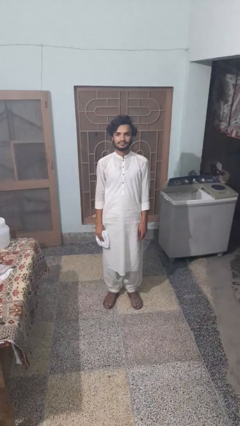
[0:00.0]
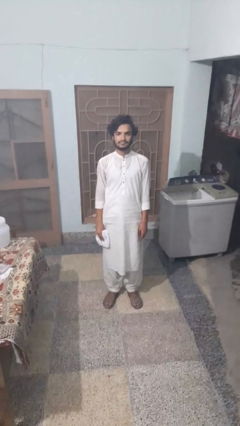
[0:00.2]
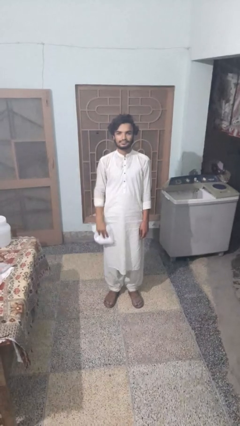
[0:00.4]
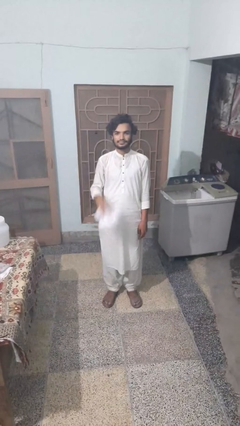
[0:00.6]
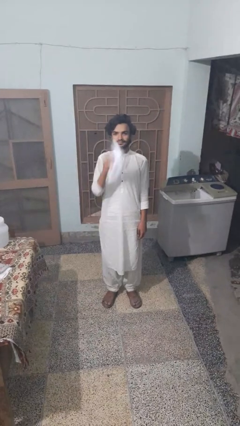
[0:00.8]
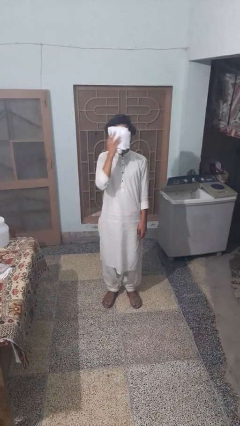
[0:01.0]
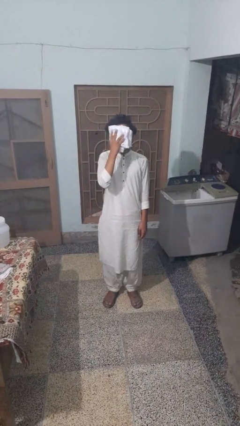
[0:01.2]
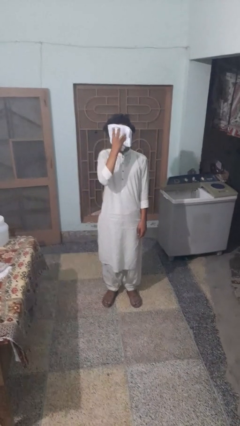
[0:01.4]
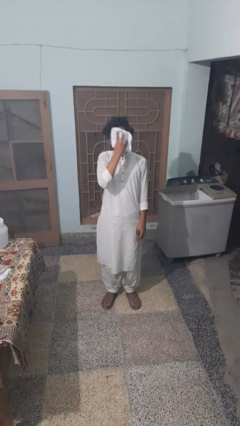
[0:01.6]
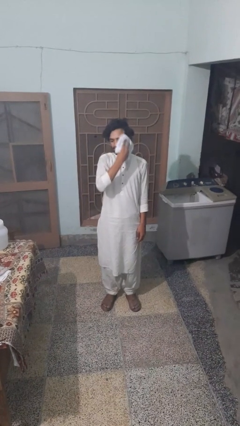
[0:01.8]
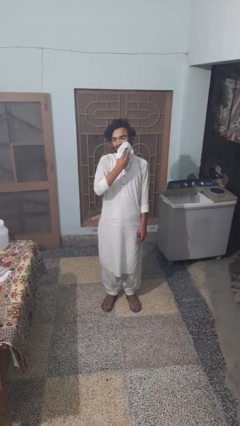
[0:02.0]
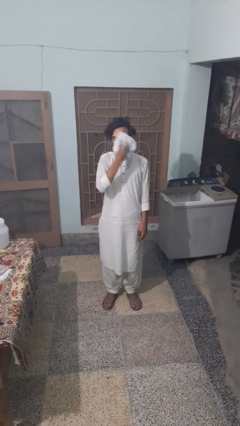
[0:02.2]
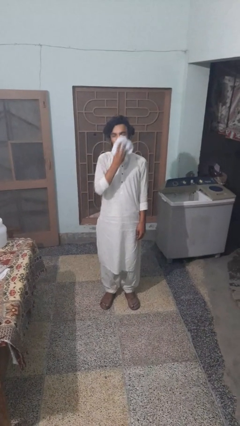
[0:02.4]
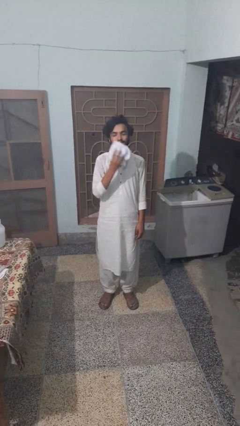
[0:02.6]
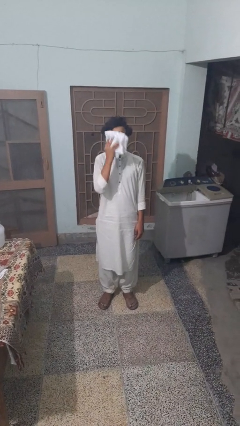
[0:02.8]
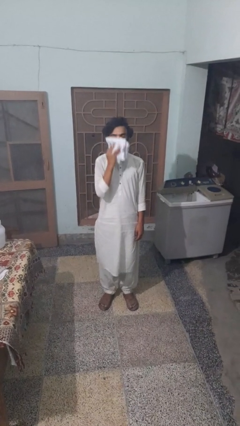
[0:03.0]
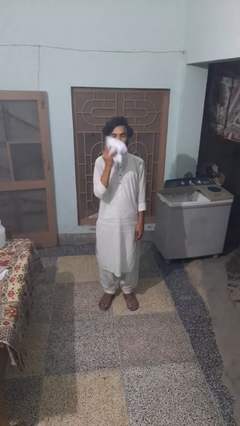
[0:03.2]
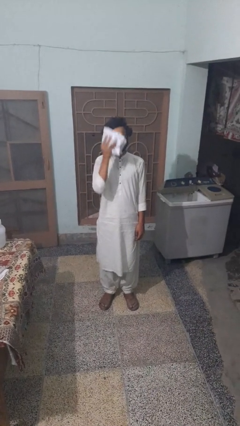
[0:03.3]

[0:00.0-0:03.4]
person wipes mouth with napkin

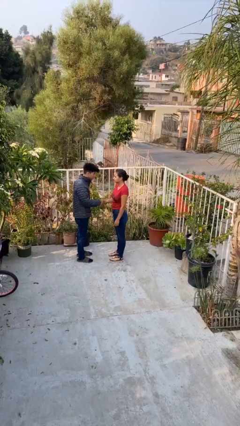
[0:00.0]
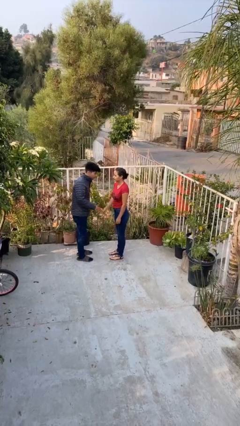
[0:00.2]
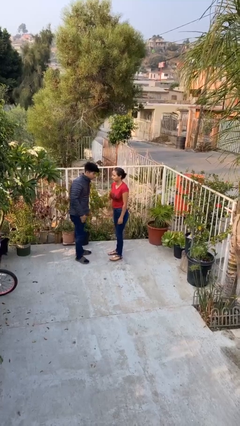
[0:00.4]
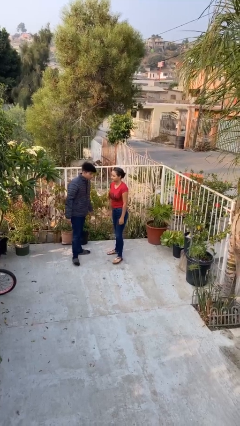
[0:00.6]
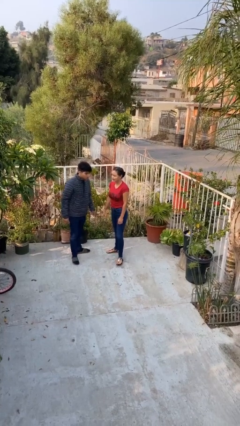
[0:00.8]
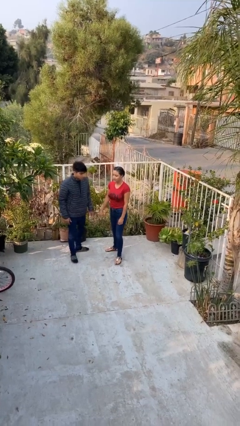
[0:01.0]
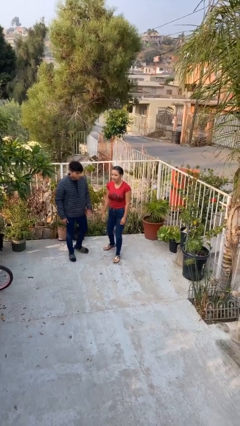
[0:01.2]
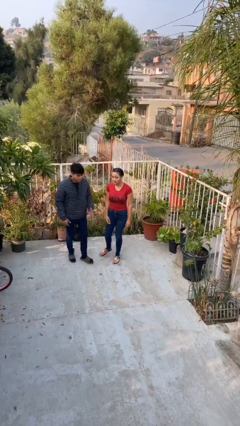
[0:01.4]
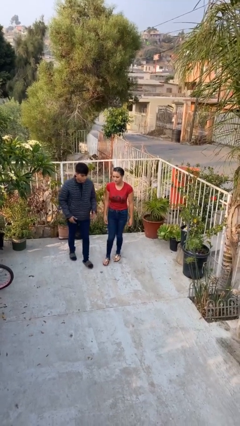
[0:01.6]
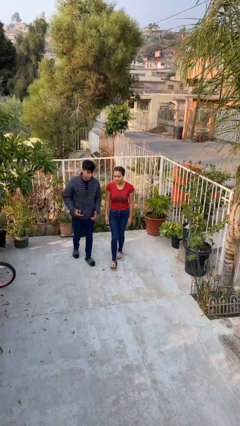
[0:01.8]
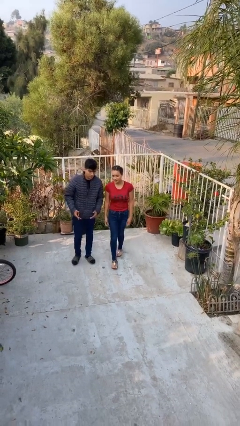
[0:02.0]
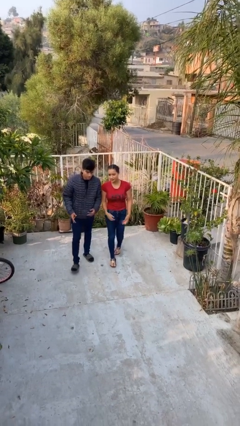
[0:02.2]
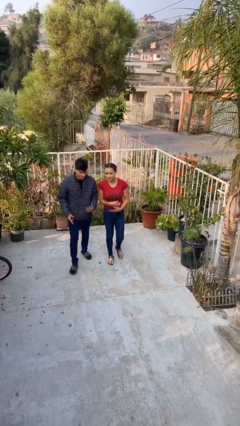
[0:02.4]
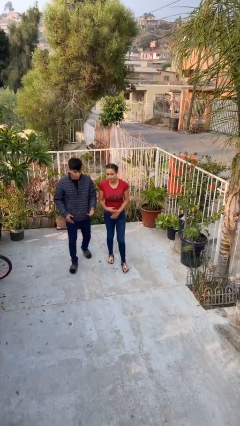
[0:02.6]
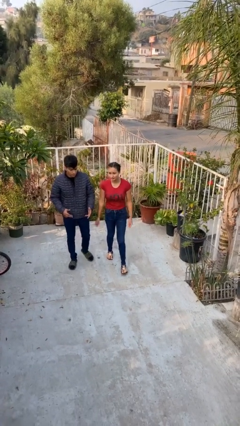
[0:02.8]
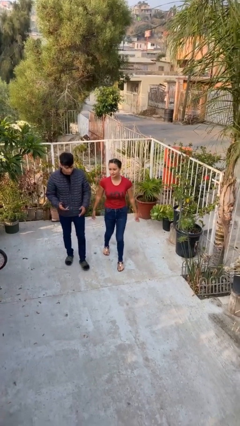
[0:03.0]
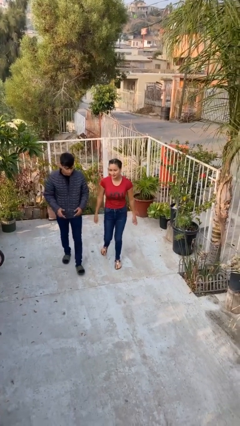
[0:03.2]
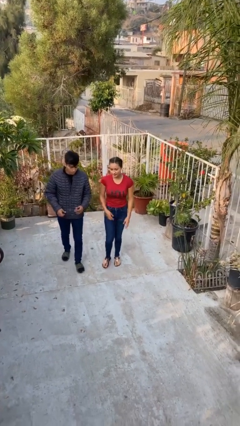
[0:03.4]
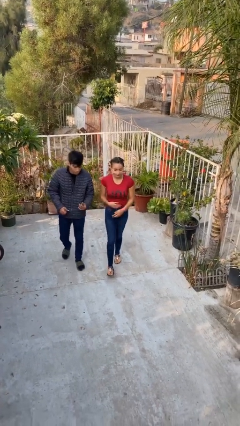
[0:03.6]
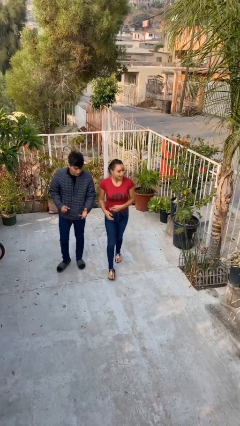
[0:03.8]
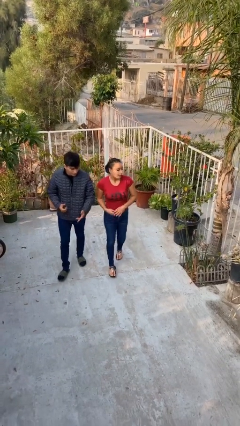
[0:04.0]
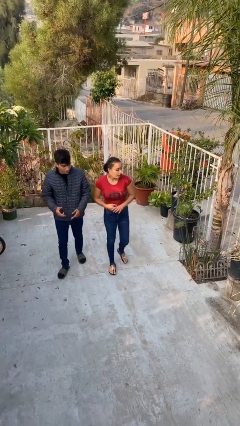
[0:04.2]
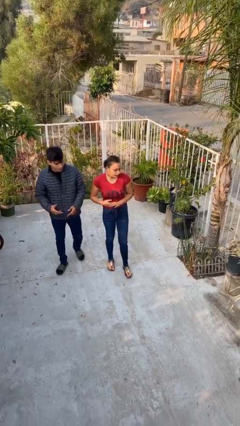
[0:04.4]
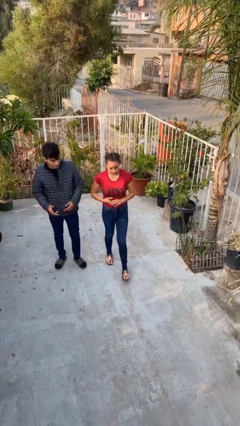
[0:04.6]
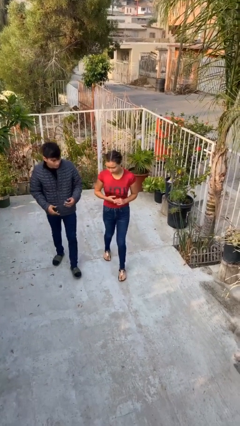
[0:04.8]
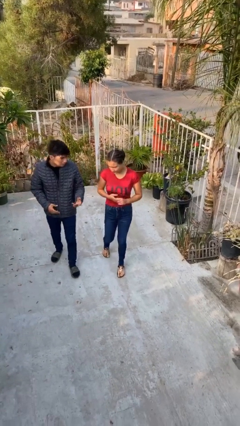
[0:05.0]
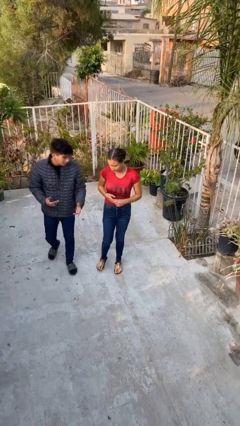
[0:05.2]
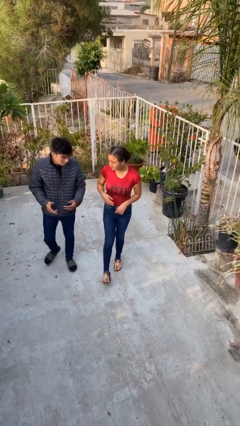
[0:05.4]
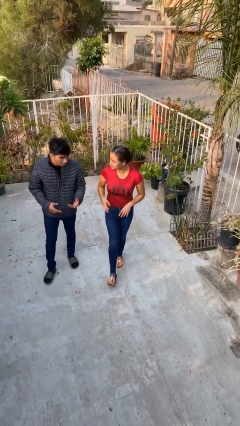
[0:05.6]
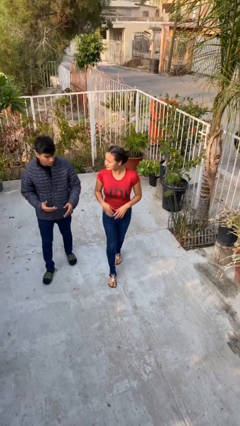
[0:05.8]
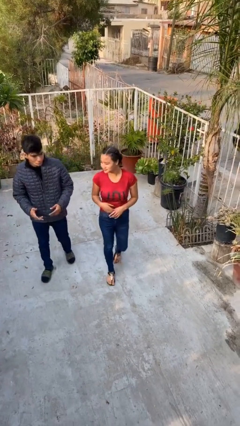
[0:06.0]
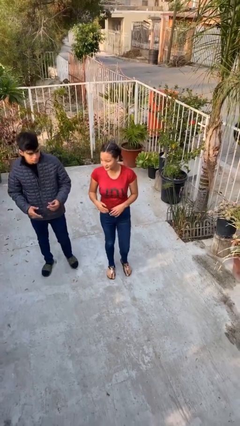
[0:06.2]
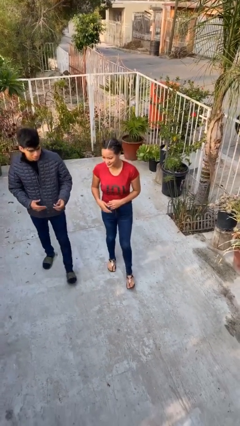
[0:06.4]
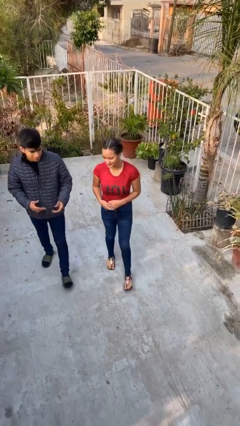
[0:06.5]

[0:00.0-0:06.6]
person talks to person

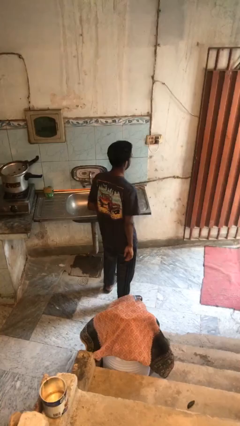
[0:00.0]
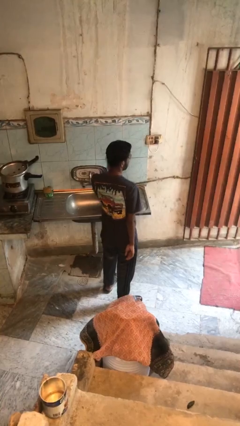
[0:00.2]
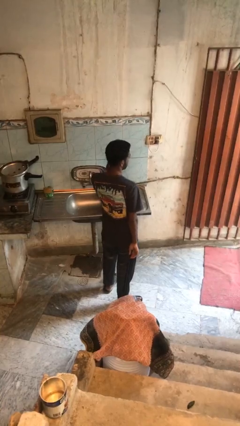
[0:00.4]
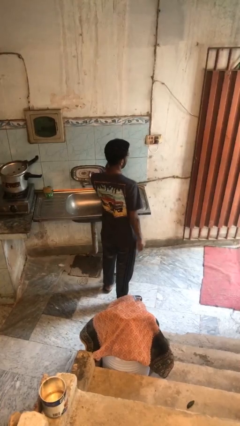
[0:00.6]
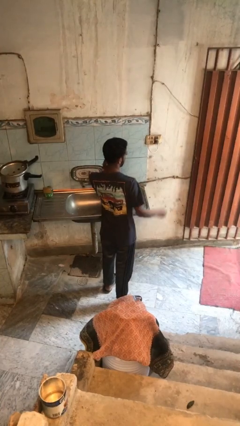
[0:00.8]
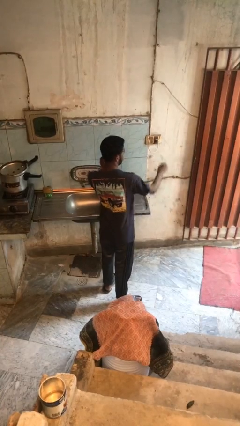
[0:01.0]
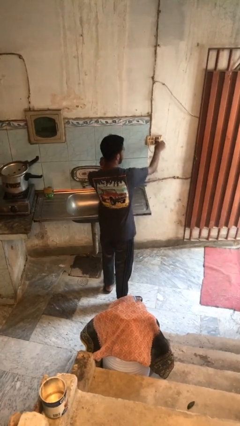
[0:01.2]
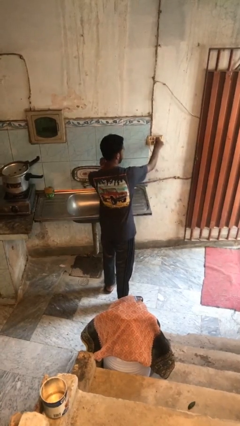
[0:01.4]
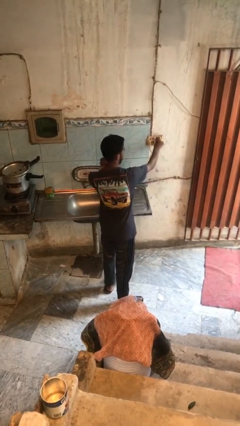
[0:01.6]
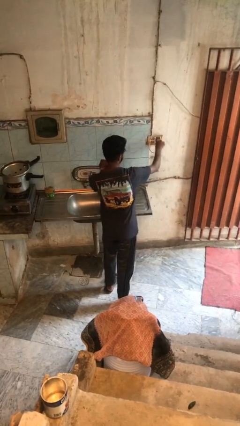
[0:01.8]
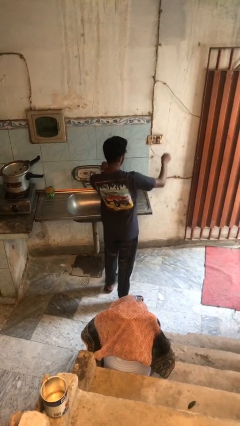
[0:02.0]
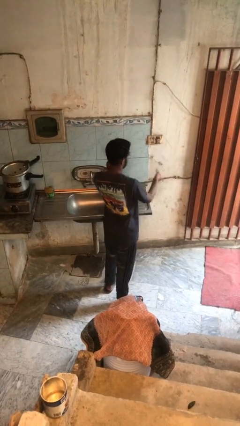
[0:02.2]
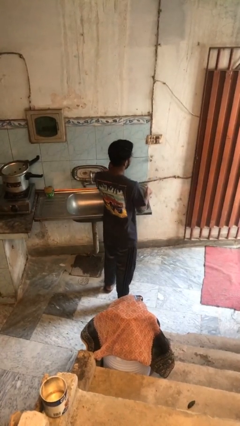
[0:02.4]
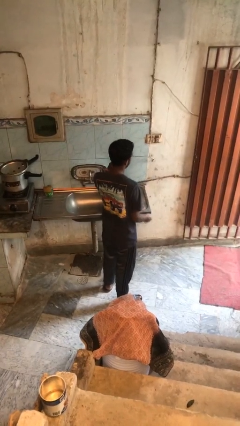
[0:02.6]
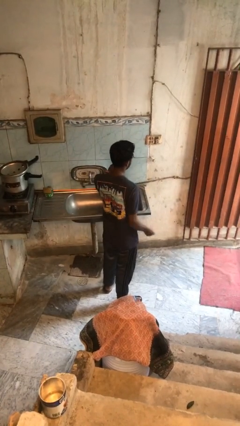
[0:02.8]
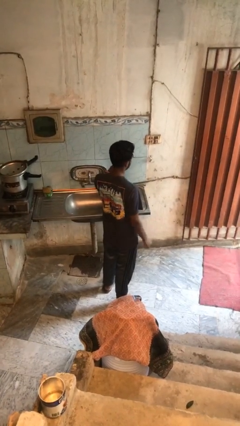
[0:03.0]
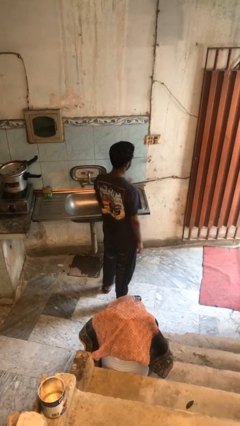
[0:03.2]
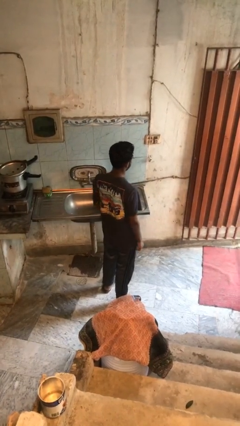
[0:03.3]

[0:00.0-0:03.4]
person unplugs from electrical socket

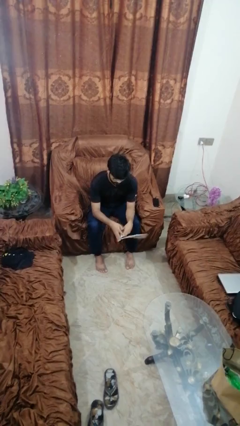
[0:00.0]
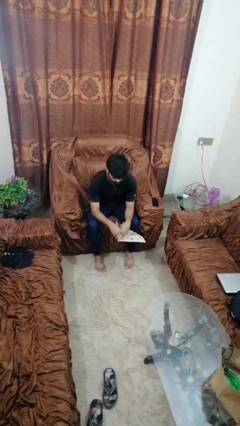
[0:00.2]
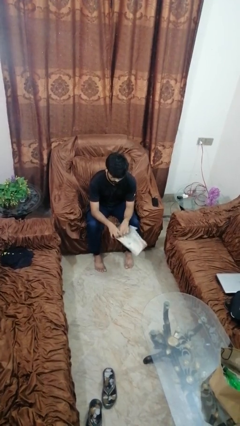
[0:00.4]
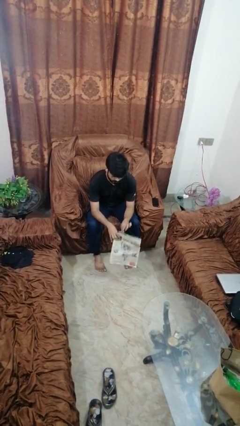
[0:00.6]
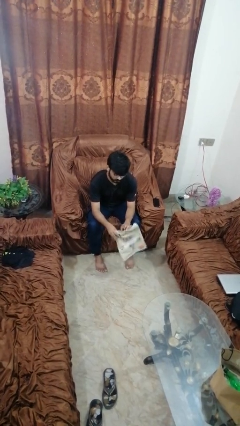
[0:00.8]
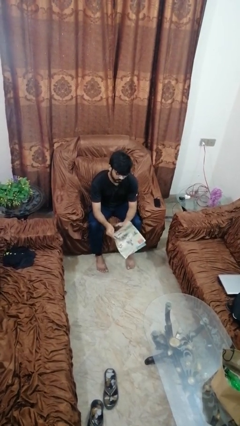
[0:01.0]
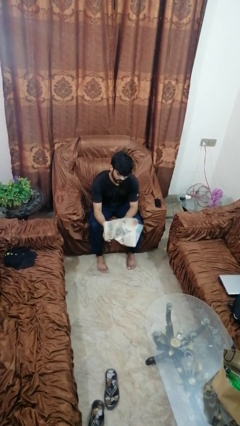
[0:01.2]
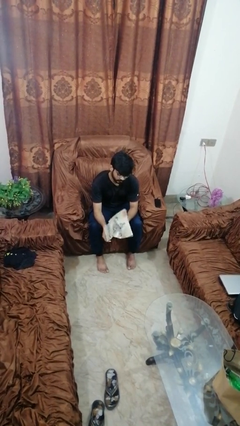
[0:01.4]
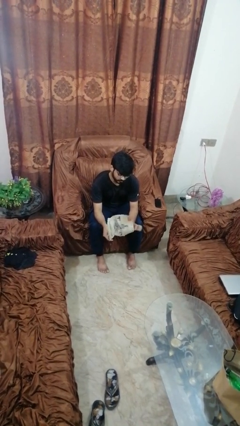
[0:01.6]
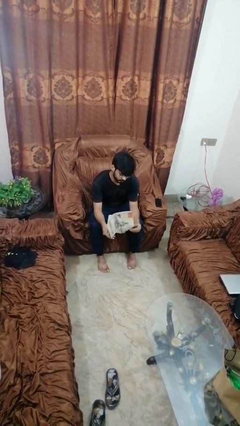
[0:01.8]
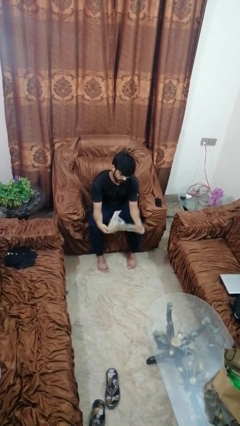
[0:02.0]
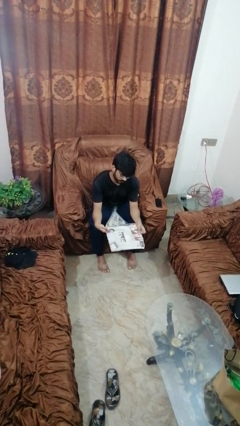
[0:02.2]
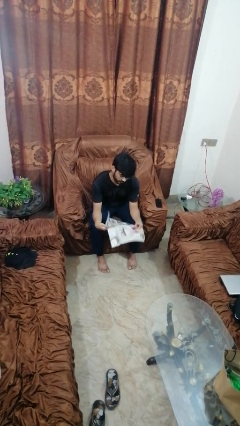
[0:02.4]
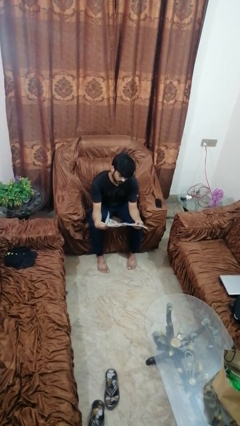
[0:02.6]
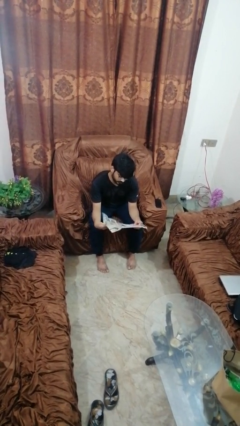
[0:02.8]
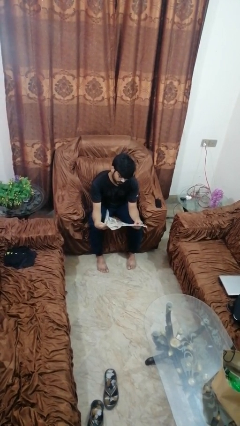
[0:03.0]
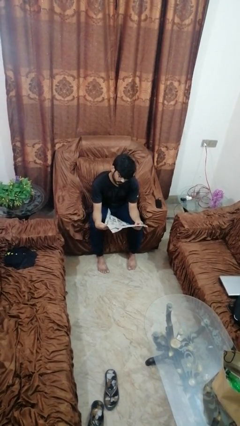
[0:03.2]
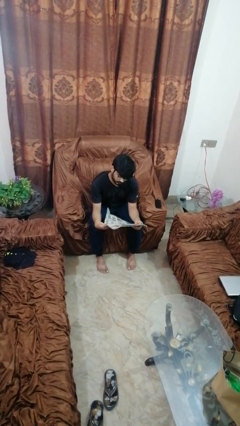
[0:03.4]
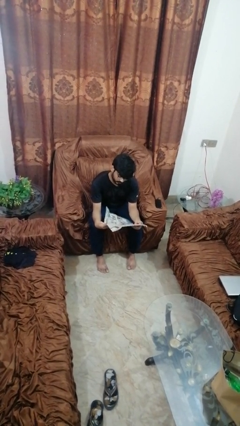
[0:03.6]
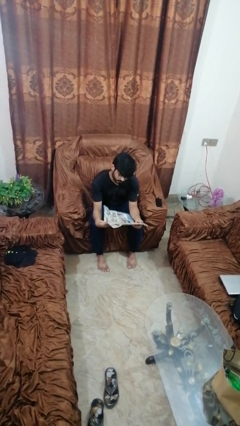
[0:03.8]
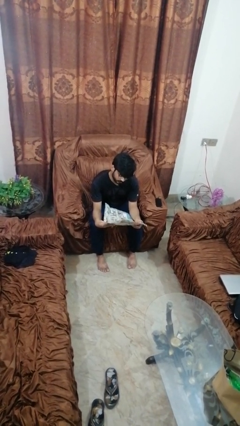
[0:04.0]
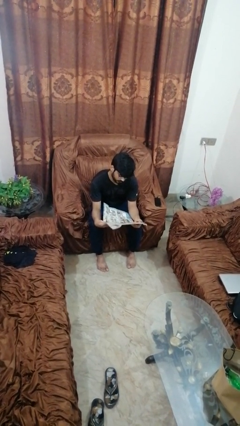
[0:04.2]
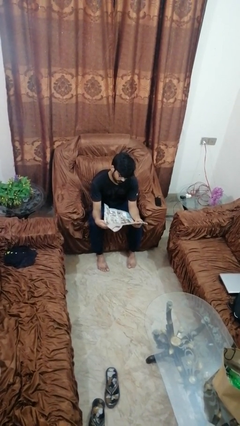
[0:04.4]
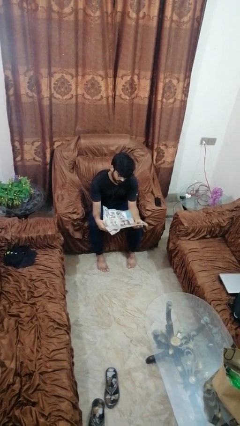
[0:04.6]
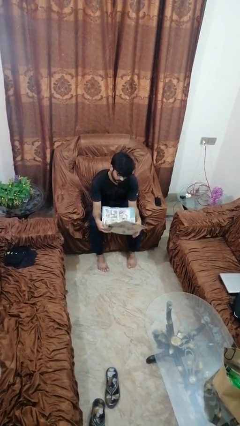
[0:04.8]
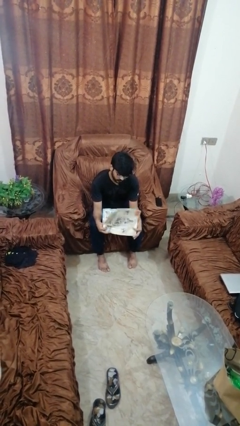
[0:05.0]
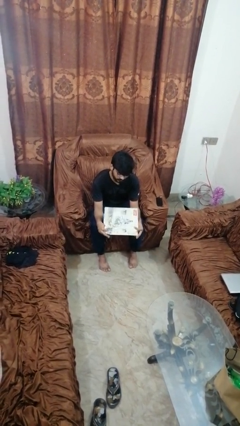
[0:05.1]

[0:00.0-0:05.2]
person reads newspaper
